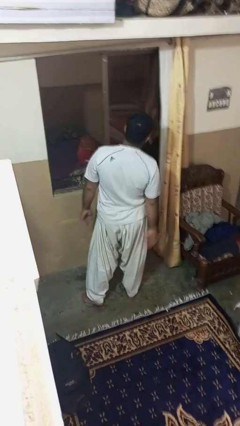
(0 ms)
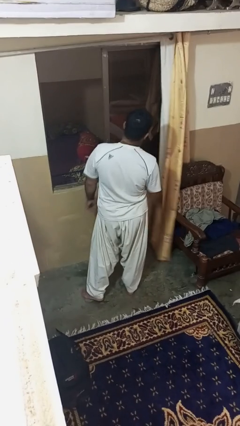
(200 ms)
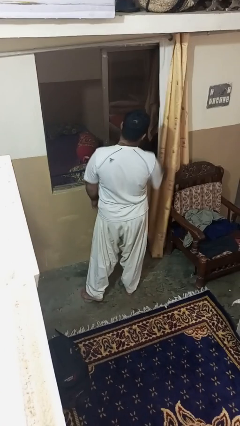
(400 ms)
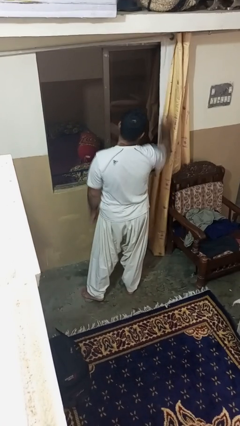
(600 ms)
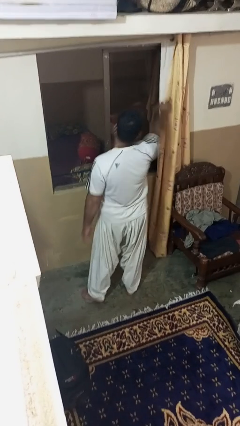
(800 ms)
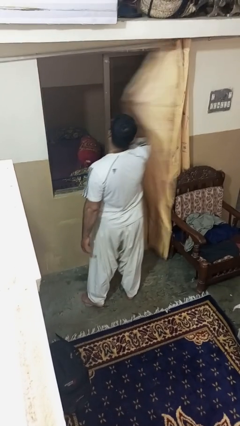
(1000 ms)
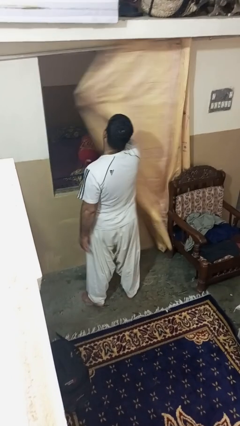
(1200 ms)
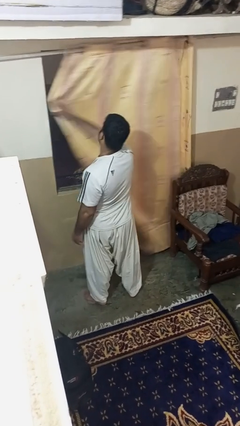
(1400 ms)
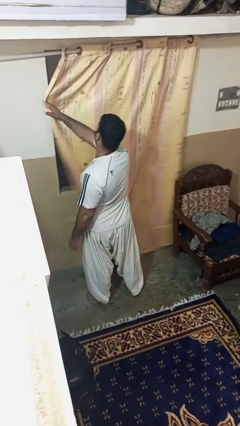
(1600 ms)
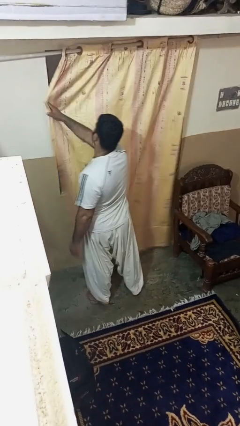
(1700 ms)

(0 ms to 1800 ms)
person closes curtains

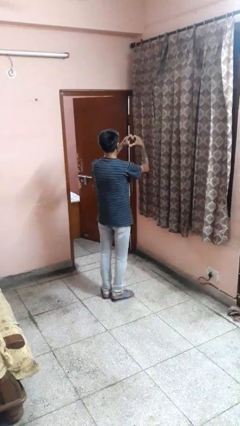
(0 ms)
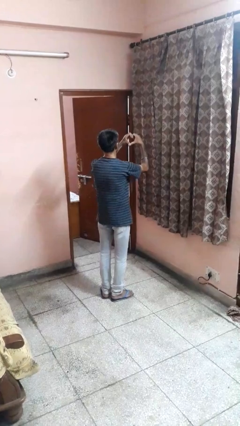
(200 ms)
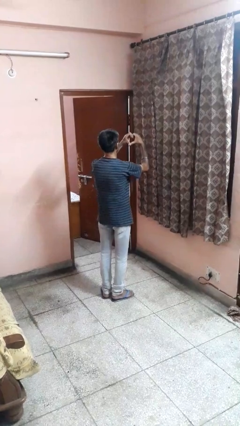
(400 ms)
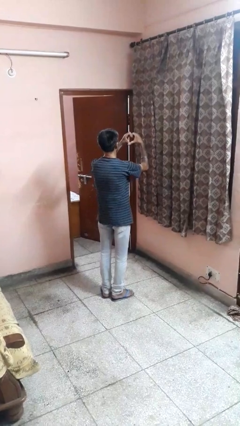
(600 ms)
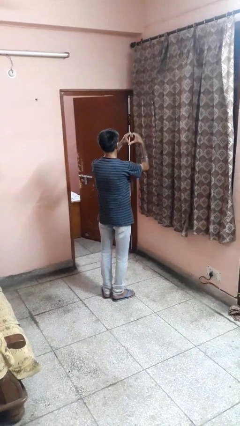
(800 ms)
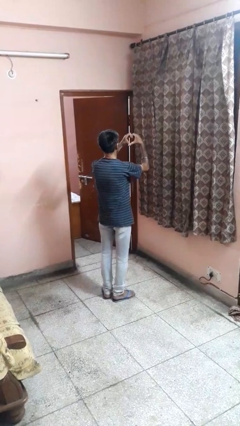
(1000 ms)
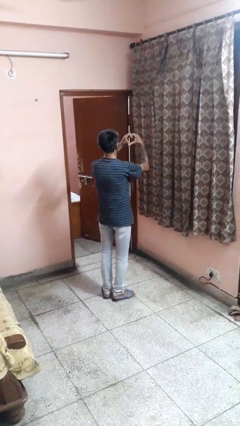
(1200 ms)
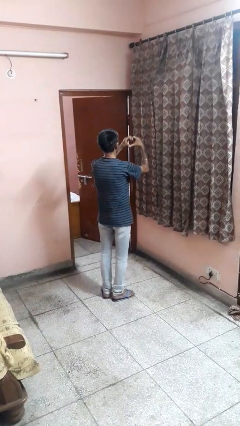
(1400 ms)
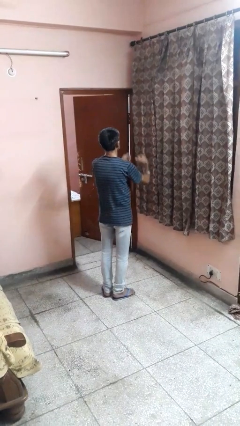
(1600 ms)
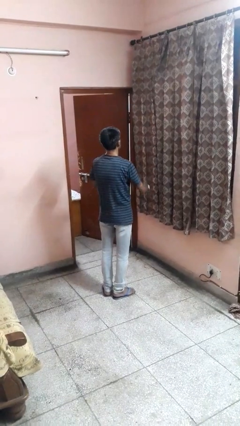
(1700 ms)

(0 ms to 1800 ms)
person gestures heart

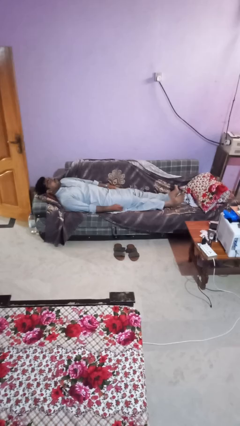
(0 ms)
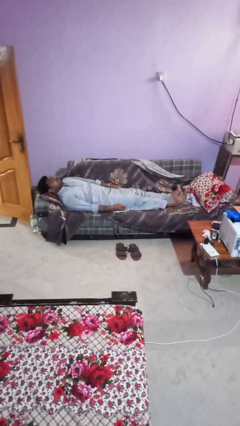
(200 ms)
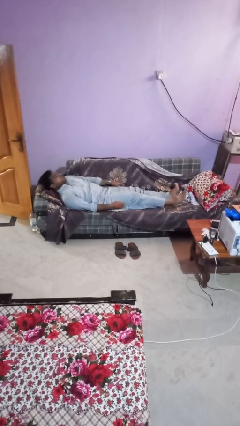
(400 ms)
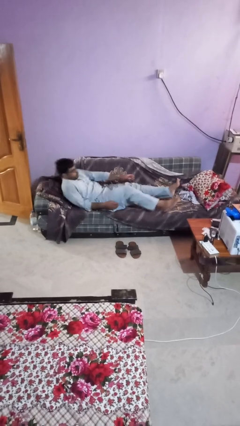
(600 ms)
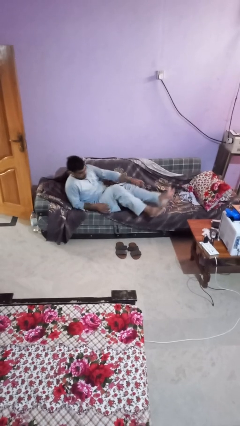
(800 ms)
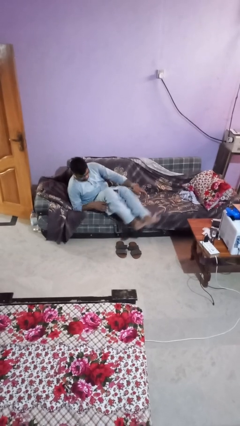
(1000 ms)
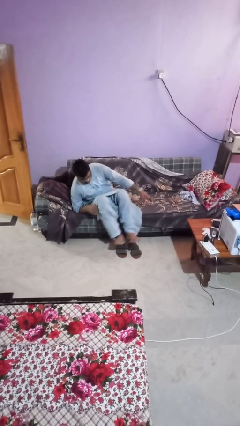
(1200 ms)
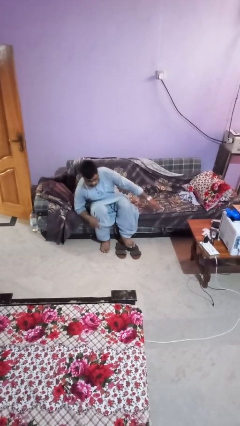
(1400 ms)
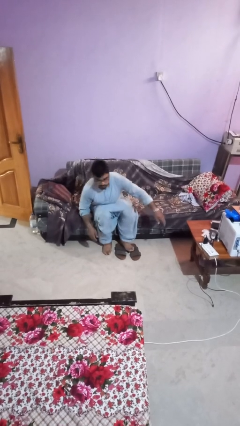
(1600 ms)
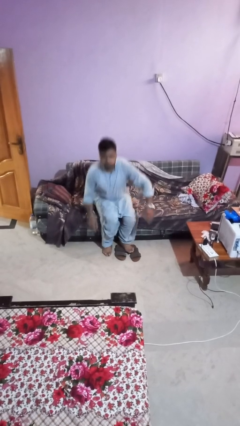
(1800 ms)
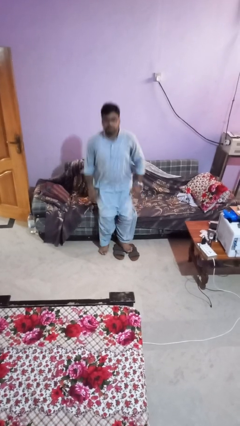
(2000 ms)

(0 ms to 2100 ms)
person stands up

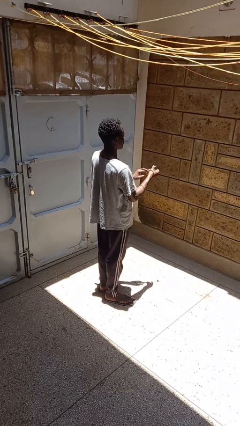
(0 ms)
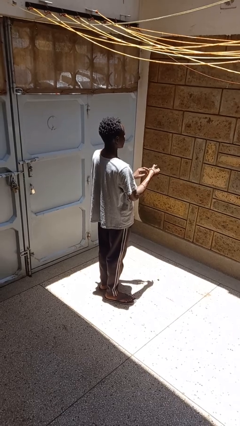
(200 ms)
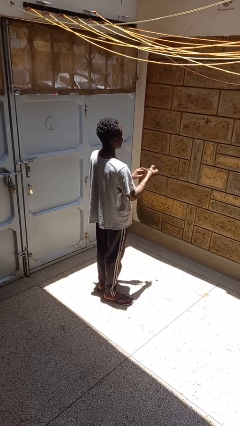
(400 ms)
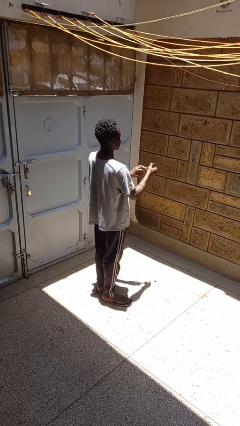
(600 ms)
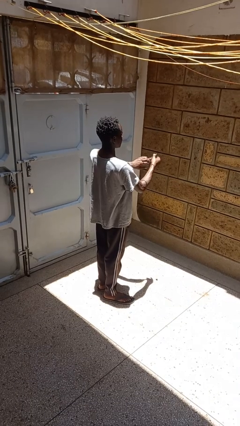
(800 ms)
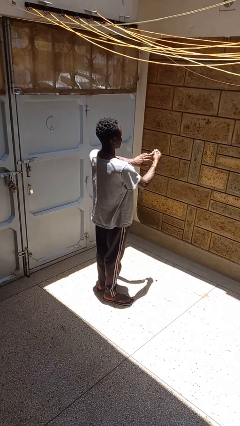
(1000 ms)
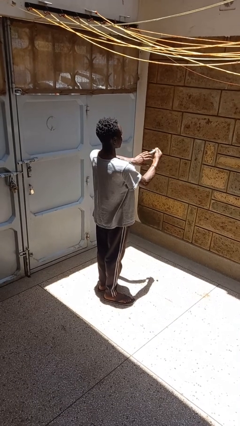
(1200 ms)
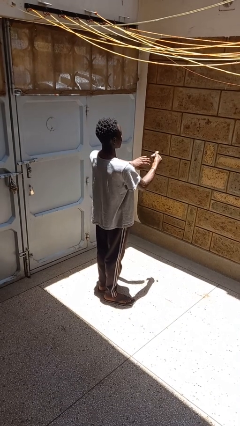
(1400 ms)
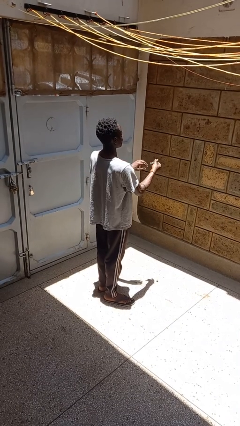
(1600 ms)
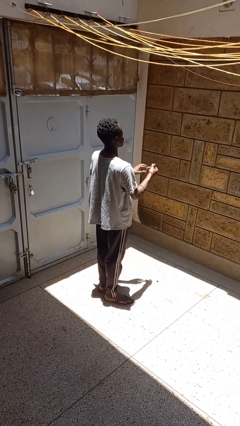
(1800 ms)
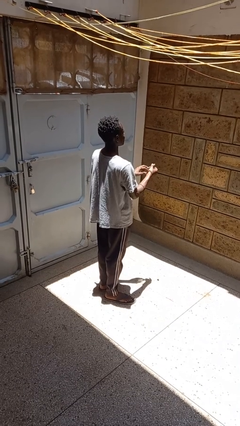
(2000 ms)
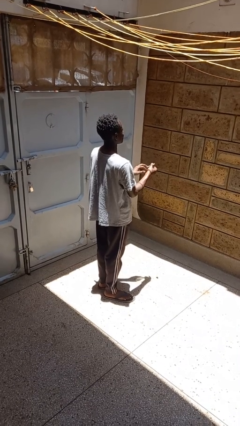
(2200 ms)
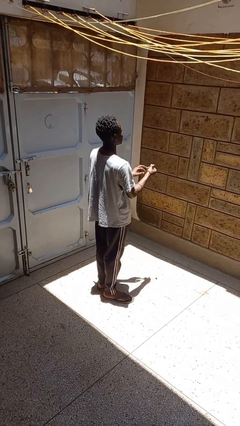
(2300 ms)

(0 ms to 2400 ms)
person clips fingernails

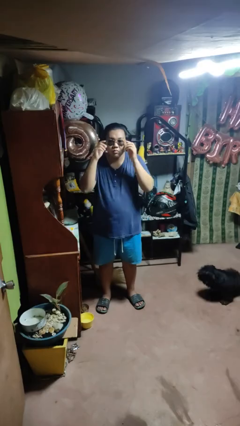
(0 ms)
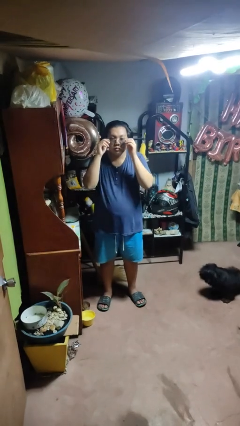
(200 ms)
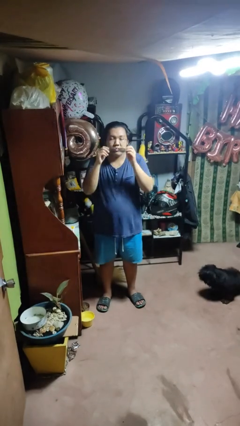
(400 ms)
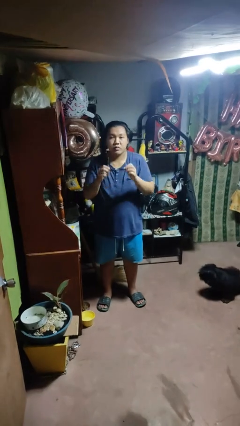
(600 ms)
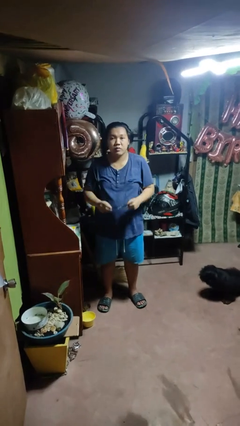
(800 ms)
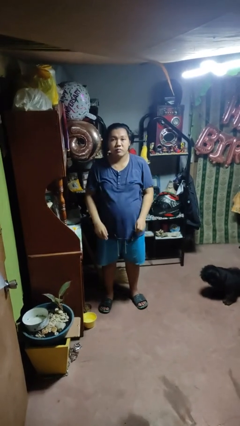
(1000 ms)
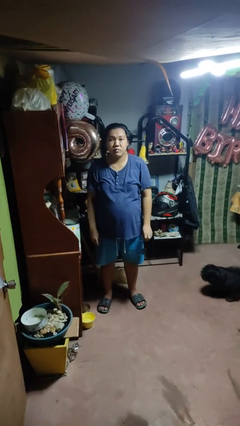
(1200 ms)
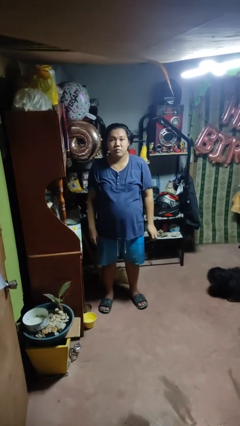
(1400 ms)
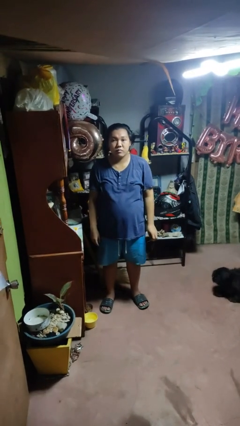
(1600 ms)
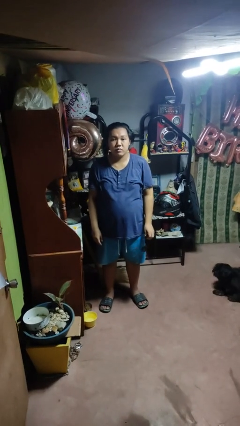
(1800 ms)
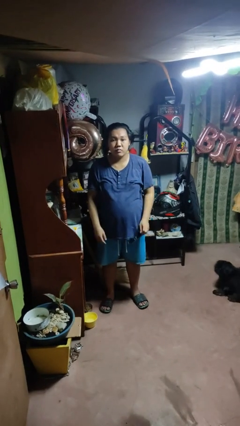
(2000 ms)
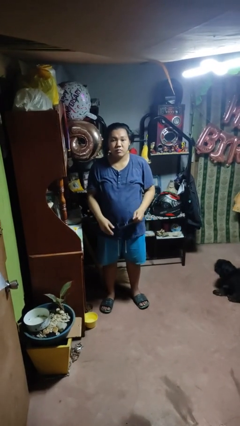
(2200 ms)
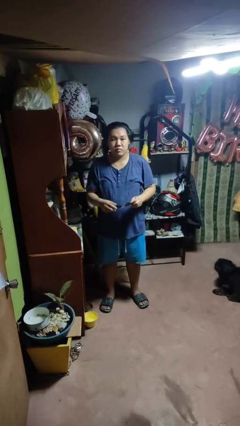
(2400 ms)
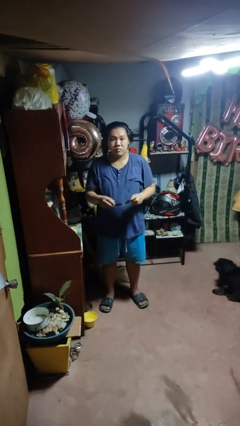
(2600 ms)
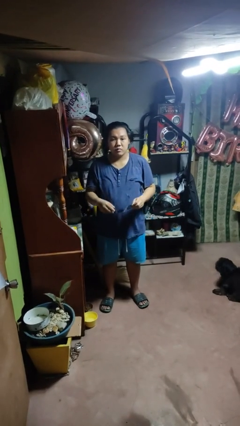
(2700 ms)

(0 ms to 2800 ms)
person takes off sunglasses

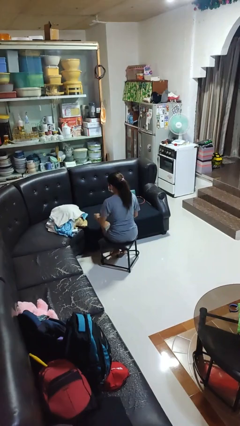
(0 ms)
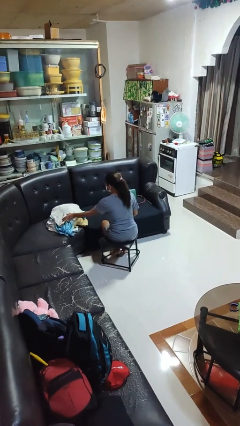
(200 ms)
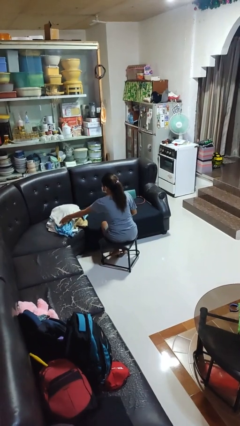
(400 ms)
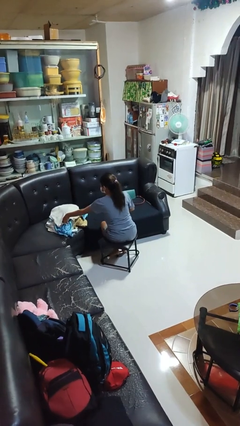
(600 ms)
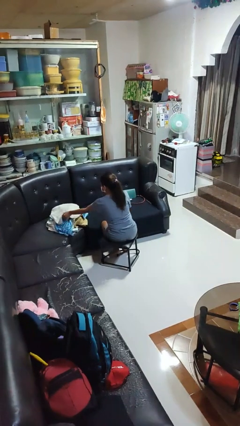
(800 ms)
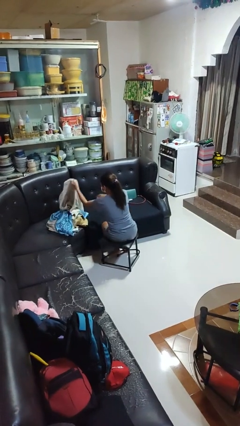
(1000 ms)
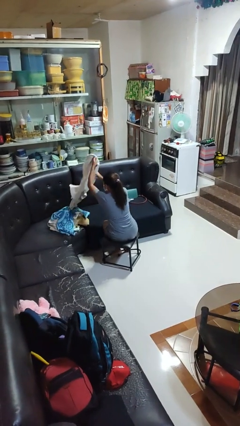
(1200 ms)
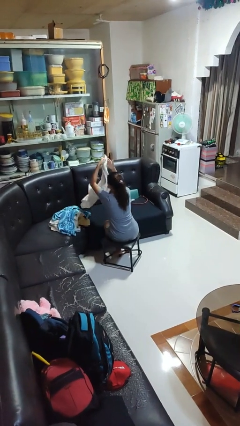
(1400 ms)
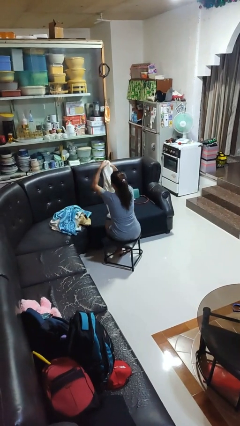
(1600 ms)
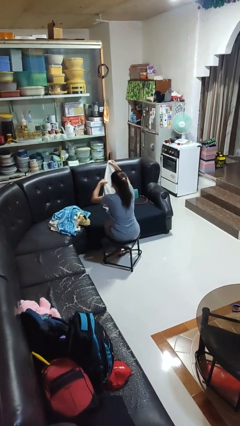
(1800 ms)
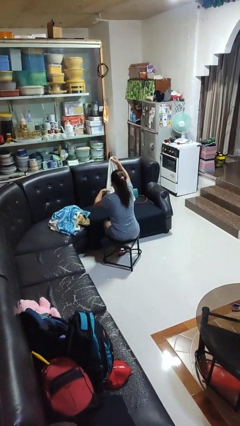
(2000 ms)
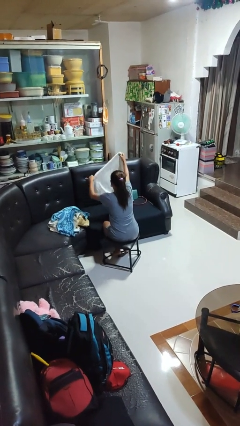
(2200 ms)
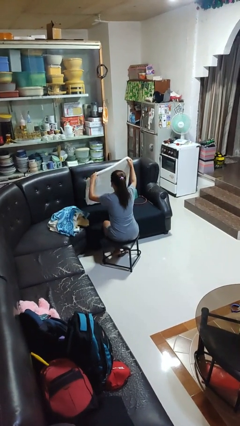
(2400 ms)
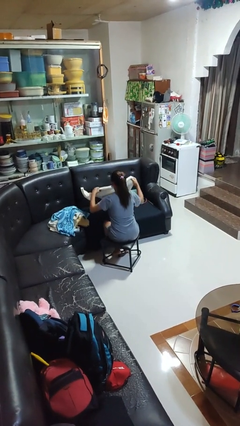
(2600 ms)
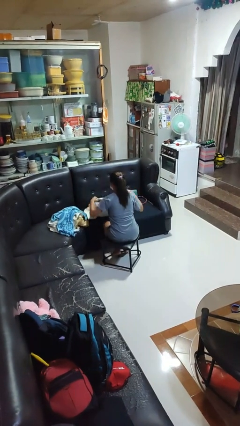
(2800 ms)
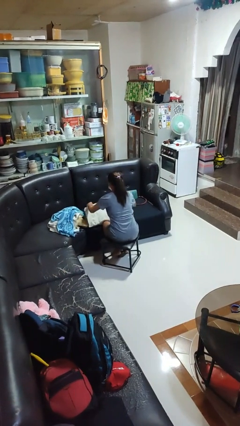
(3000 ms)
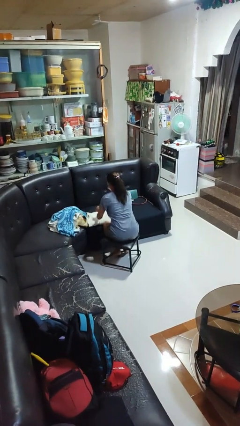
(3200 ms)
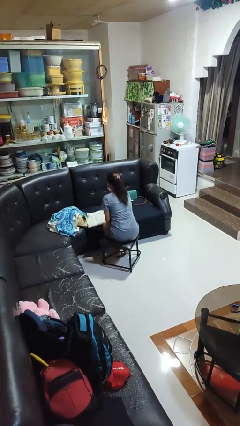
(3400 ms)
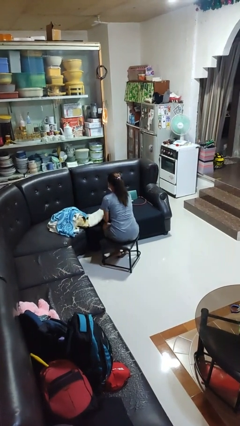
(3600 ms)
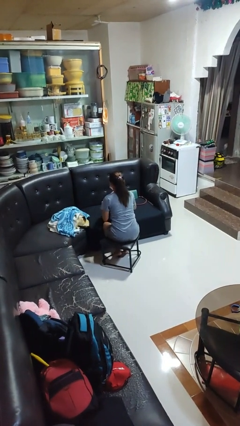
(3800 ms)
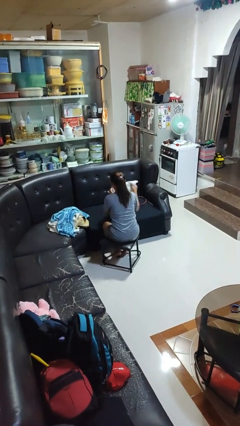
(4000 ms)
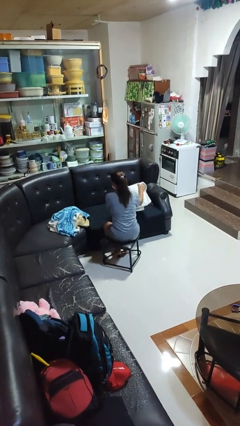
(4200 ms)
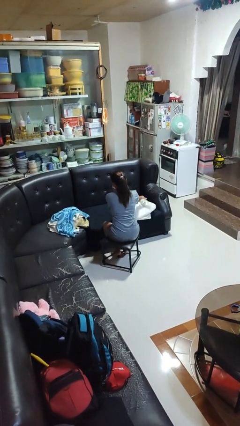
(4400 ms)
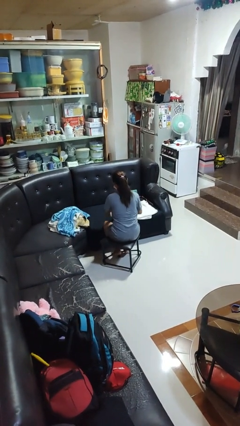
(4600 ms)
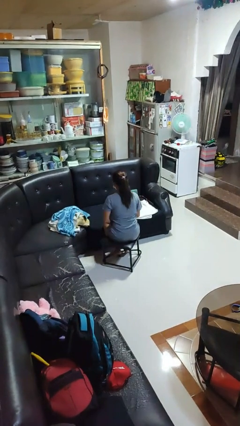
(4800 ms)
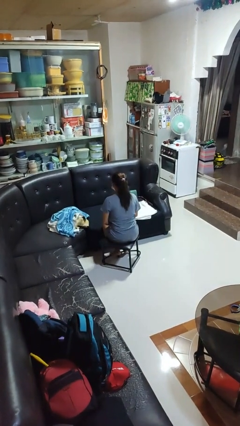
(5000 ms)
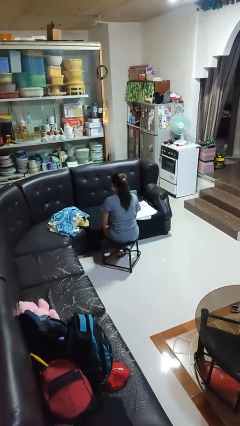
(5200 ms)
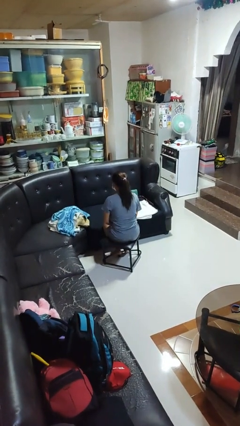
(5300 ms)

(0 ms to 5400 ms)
person folds towel

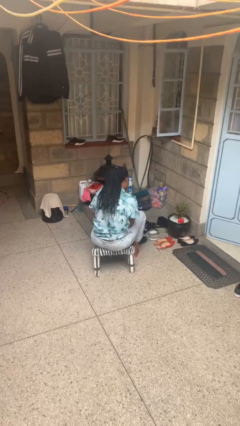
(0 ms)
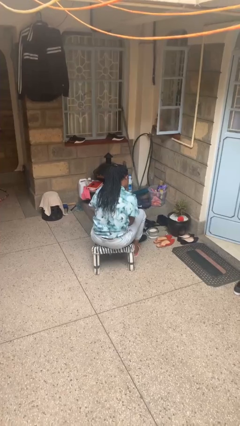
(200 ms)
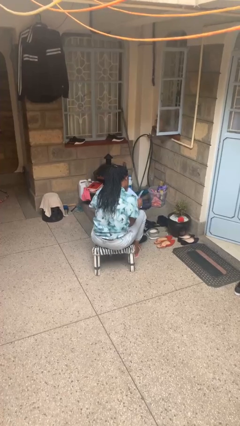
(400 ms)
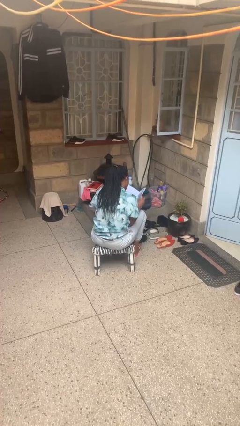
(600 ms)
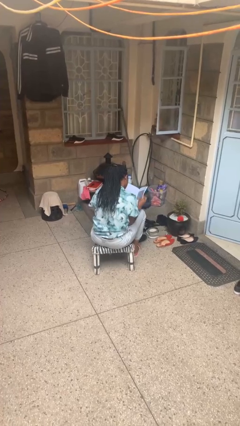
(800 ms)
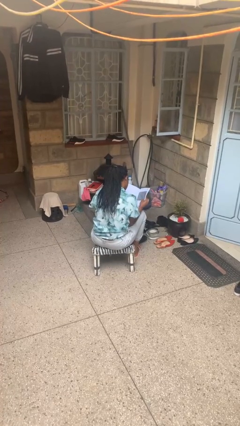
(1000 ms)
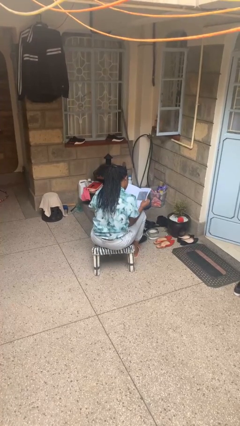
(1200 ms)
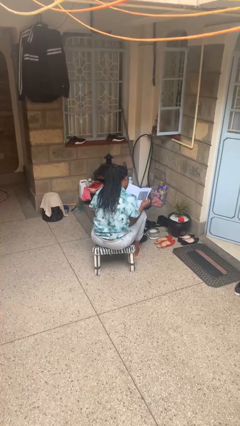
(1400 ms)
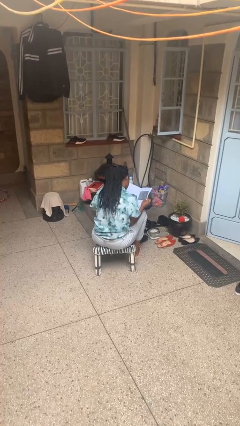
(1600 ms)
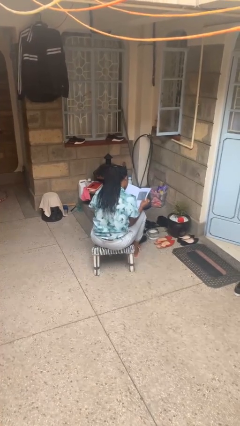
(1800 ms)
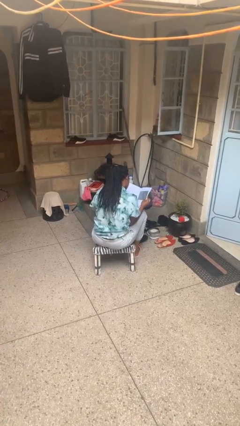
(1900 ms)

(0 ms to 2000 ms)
person reads magazine
